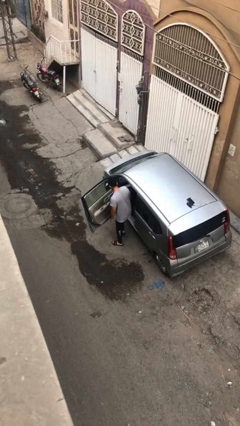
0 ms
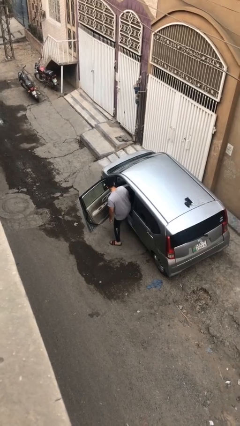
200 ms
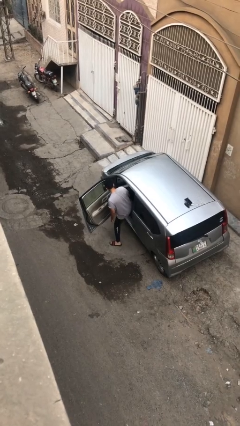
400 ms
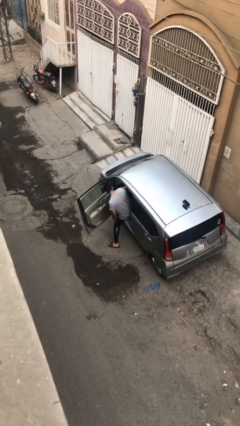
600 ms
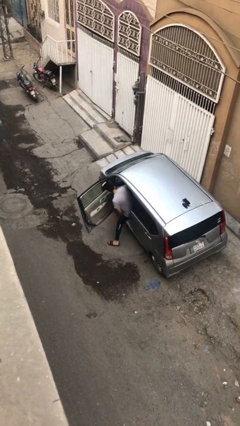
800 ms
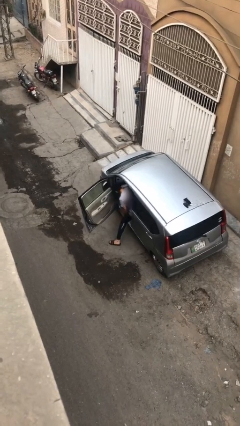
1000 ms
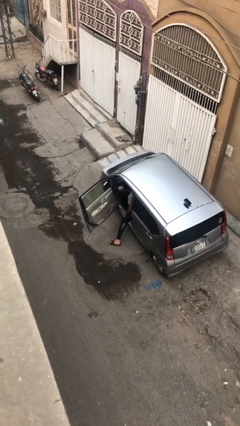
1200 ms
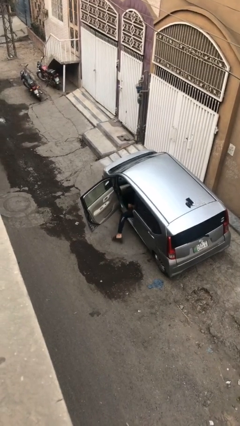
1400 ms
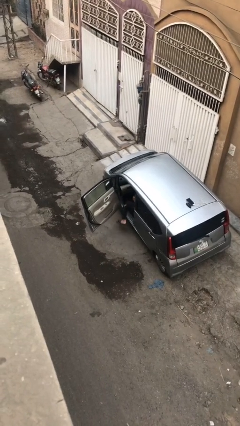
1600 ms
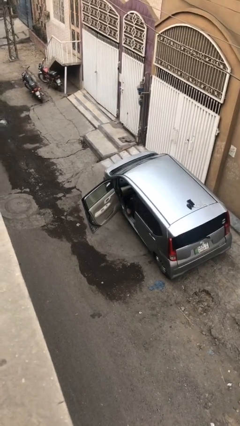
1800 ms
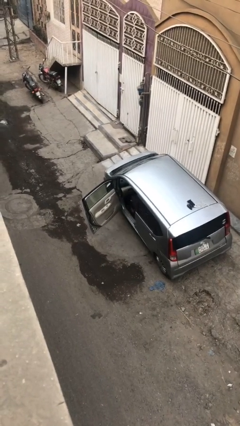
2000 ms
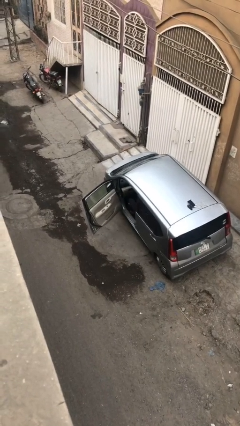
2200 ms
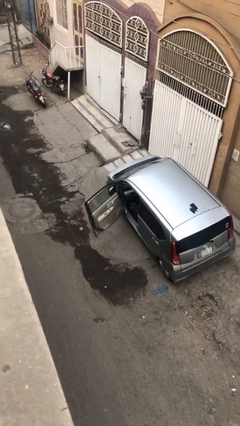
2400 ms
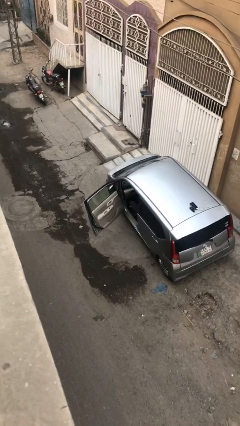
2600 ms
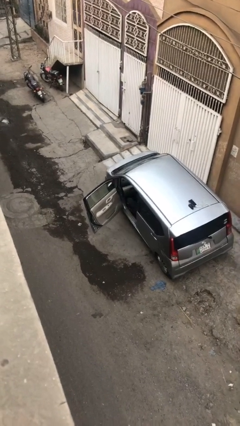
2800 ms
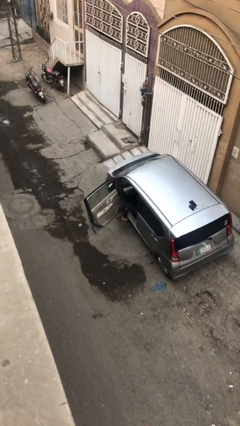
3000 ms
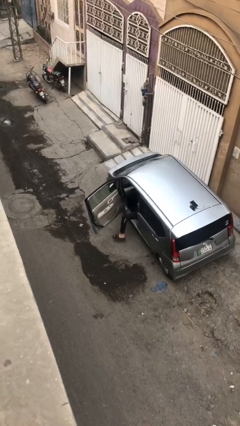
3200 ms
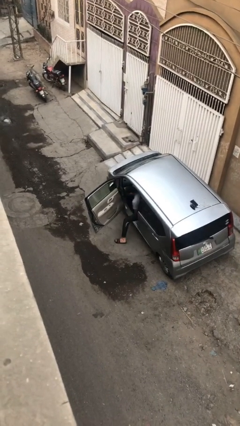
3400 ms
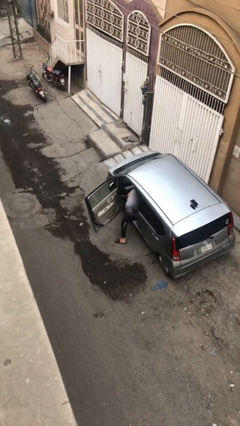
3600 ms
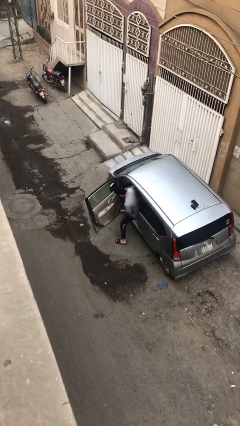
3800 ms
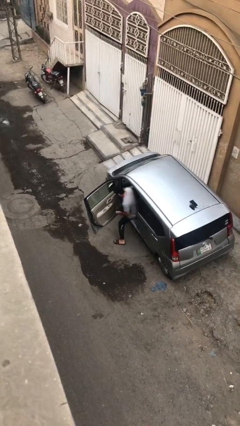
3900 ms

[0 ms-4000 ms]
person enters car

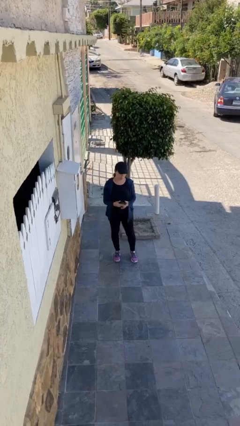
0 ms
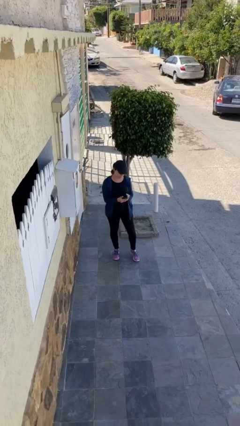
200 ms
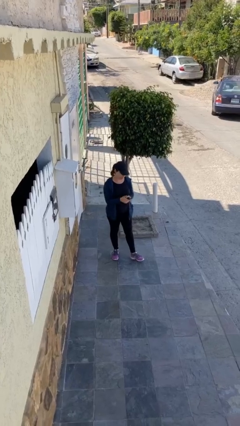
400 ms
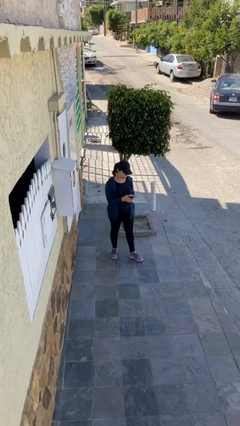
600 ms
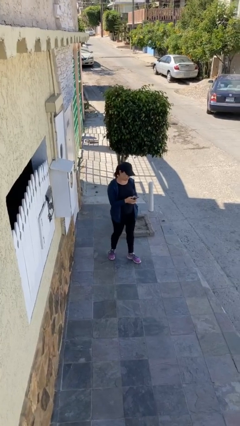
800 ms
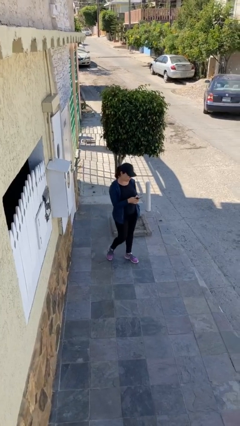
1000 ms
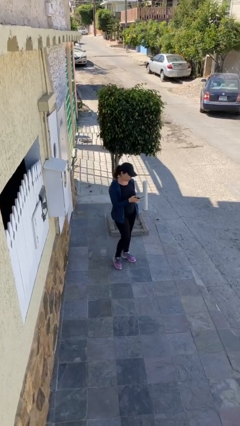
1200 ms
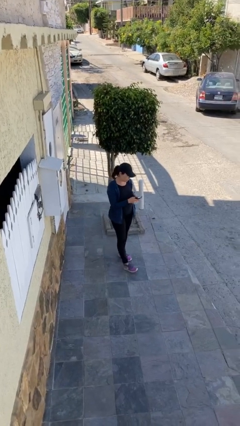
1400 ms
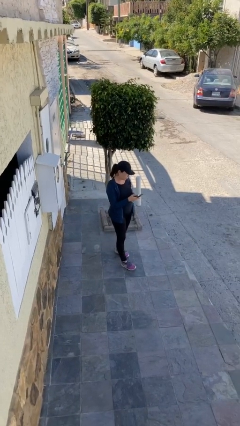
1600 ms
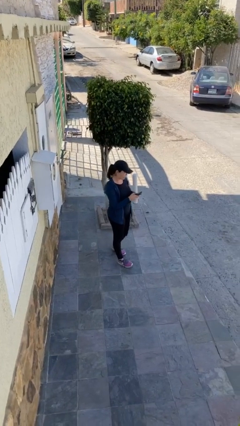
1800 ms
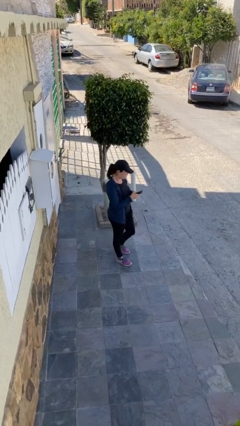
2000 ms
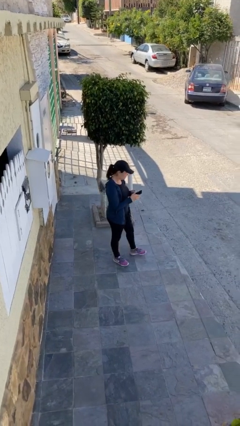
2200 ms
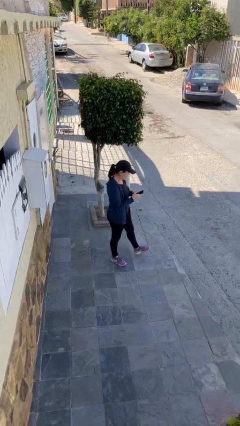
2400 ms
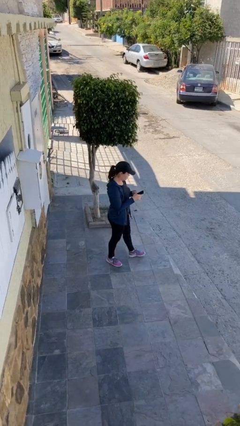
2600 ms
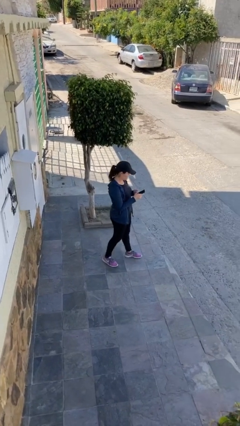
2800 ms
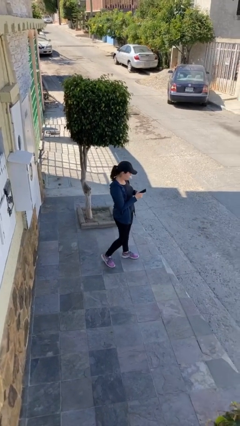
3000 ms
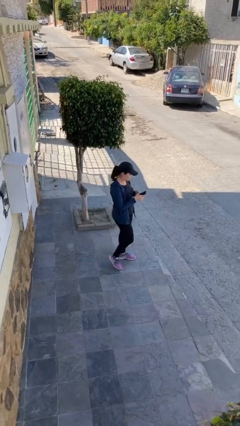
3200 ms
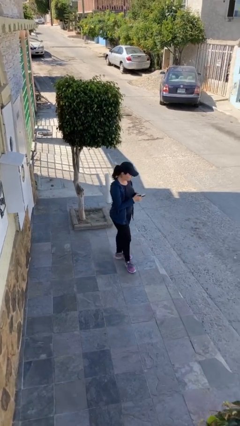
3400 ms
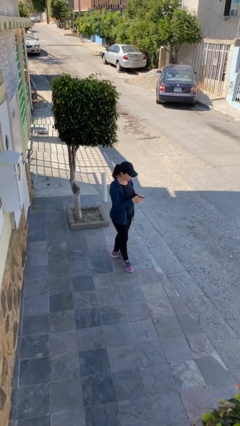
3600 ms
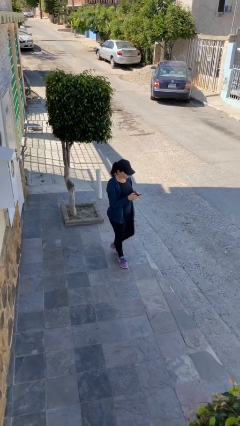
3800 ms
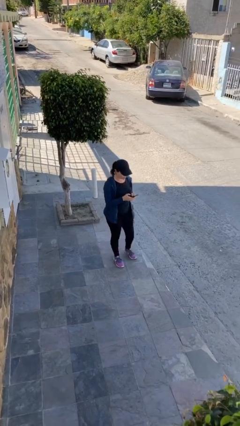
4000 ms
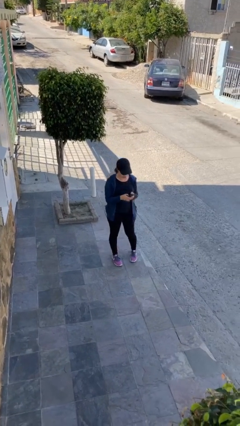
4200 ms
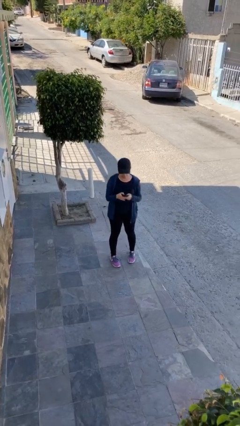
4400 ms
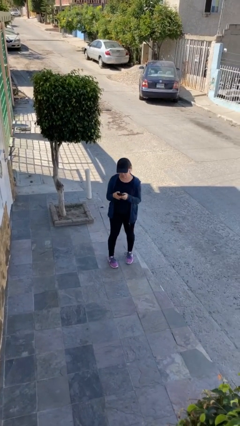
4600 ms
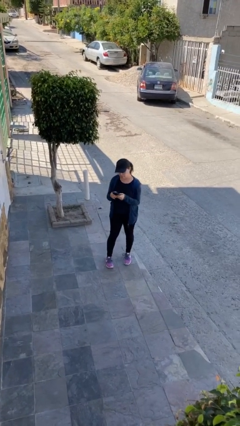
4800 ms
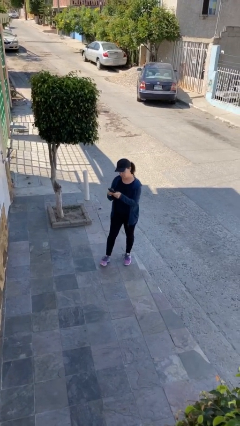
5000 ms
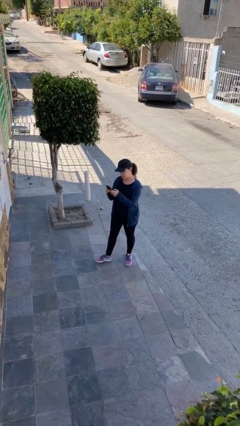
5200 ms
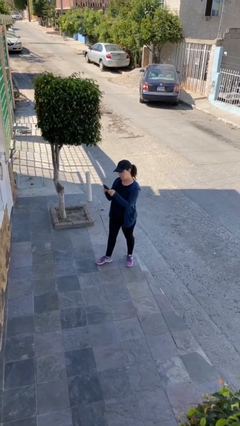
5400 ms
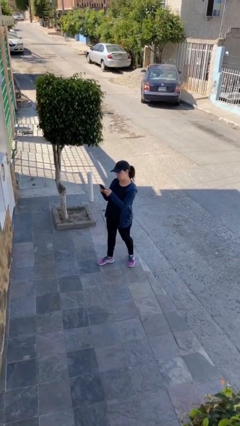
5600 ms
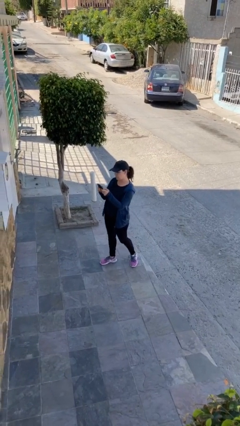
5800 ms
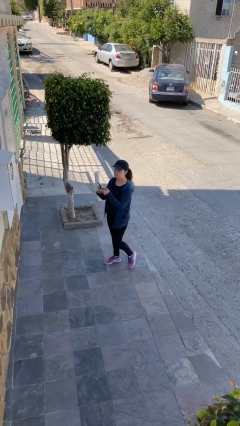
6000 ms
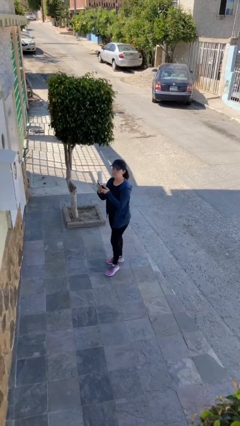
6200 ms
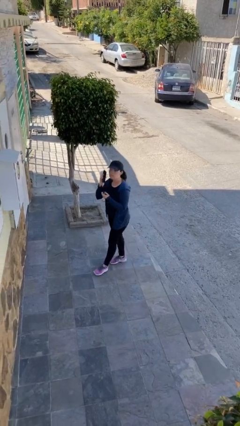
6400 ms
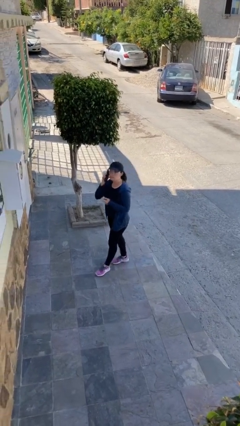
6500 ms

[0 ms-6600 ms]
person texts on phone

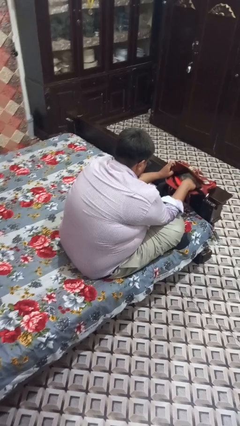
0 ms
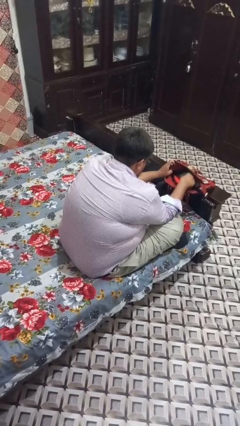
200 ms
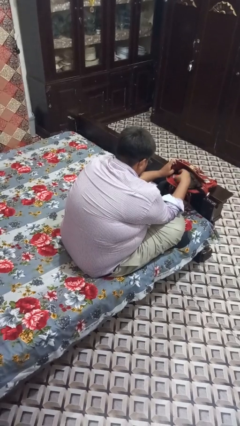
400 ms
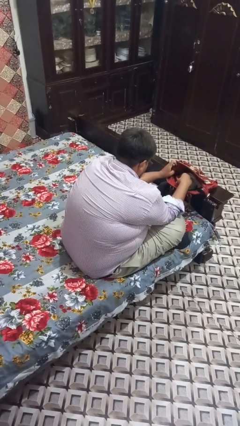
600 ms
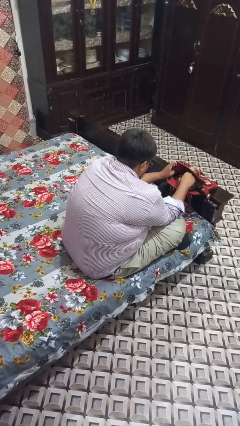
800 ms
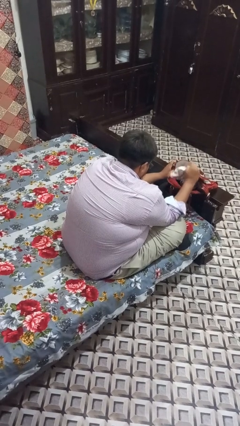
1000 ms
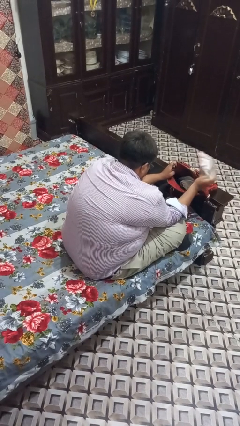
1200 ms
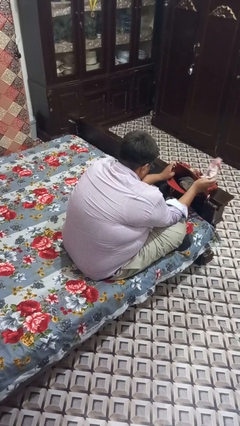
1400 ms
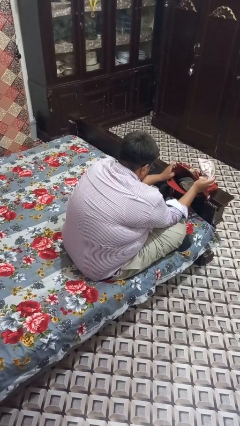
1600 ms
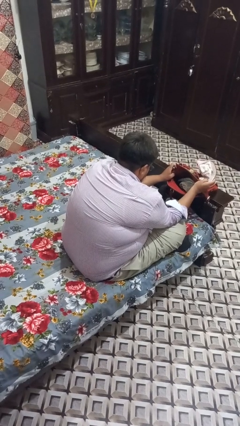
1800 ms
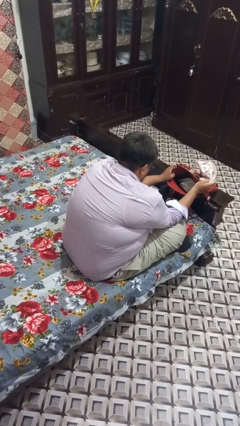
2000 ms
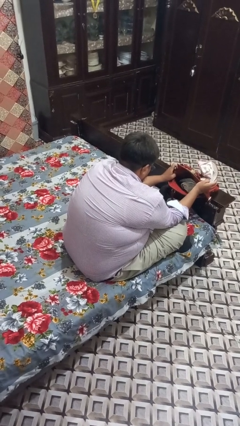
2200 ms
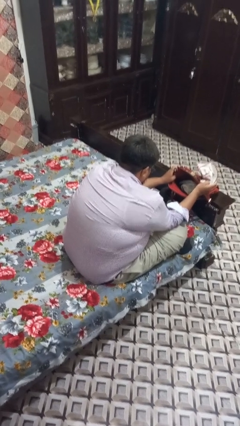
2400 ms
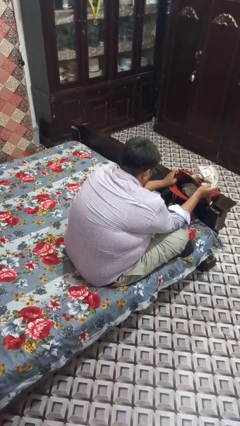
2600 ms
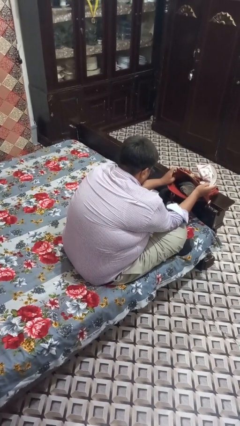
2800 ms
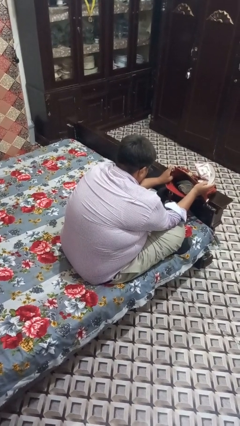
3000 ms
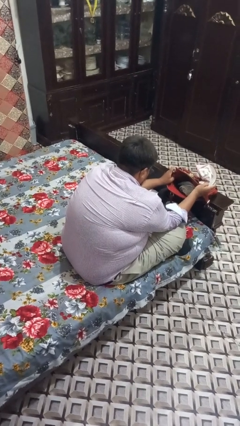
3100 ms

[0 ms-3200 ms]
person takes object from purse

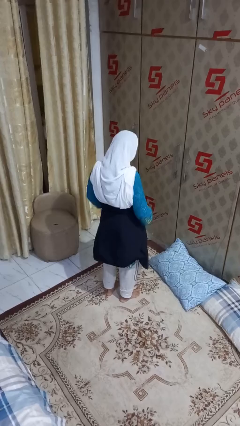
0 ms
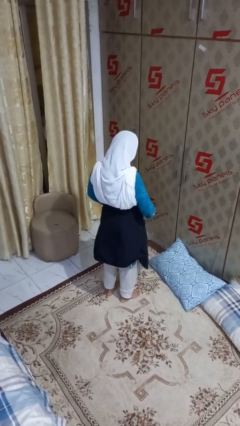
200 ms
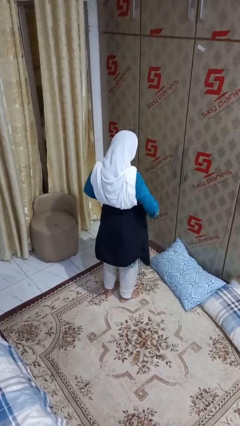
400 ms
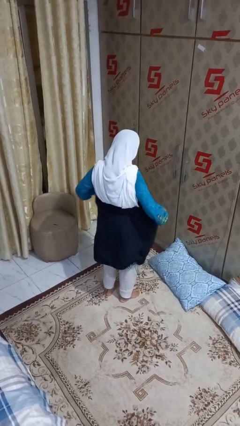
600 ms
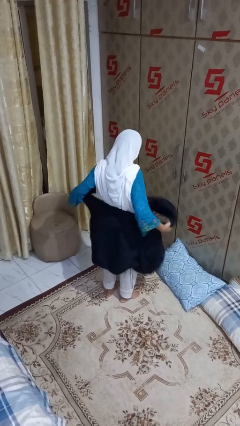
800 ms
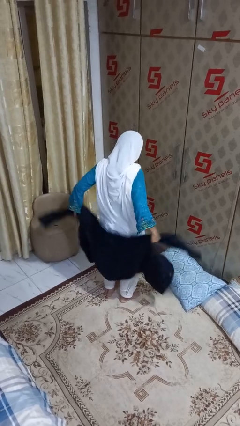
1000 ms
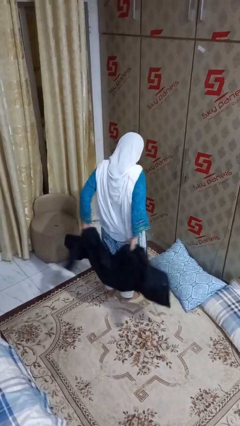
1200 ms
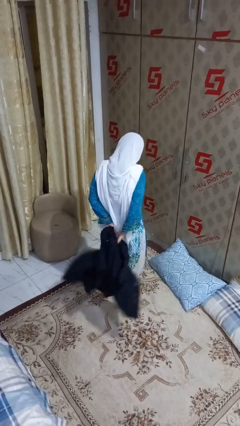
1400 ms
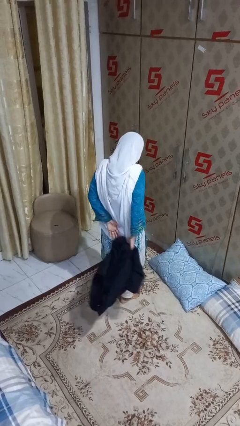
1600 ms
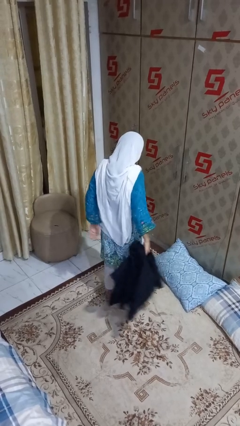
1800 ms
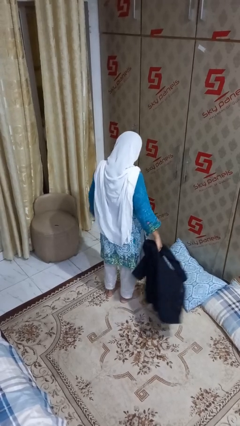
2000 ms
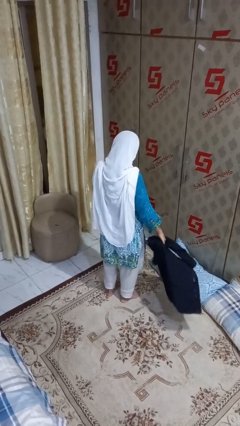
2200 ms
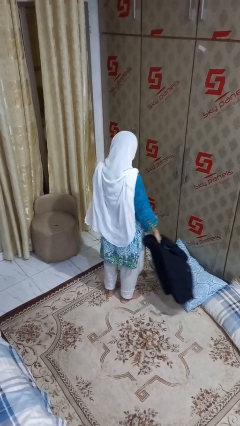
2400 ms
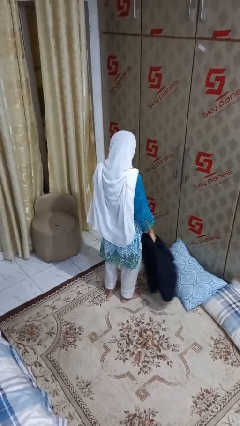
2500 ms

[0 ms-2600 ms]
person unties jacket around waist

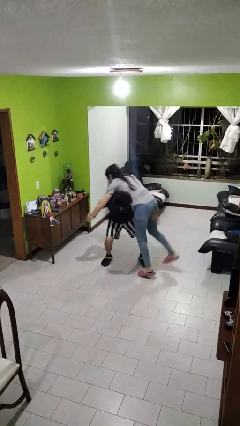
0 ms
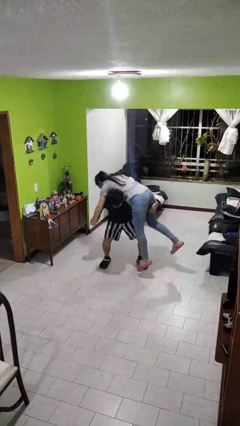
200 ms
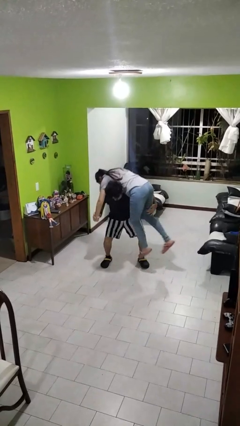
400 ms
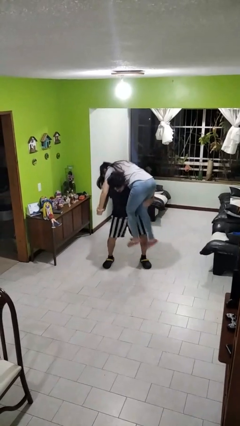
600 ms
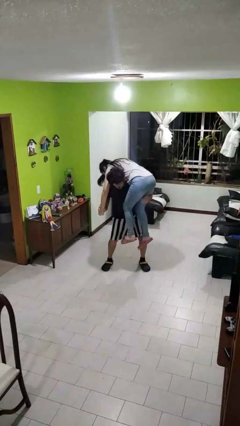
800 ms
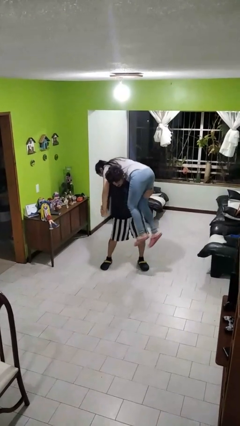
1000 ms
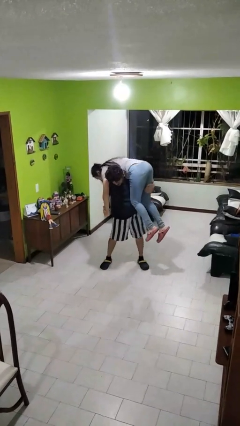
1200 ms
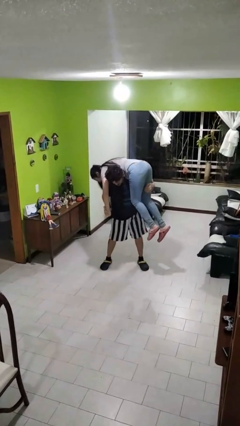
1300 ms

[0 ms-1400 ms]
person carries person over shoulder
